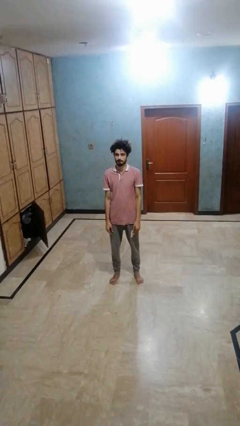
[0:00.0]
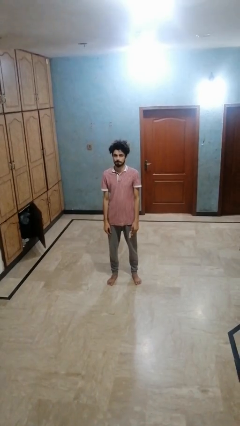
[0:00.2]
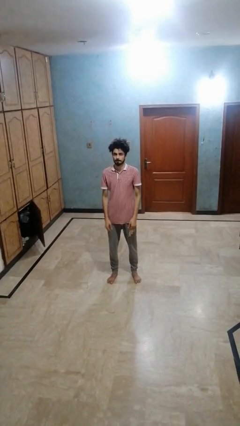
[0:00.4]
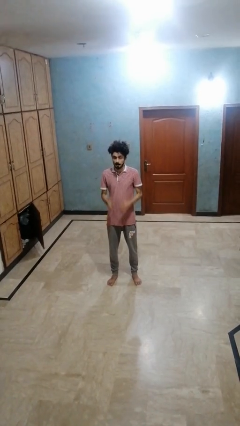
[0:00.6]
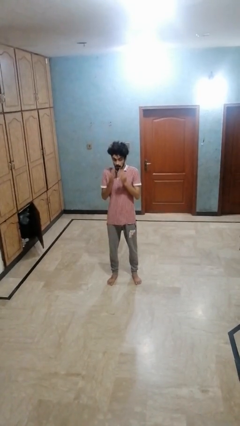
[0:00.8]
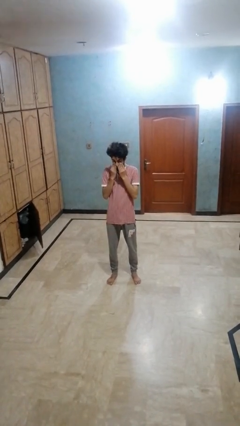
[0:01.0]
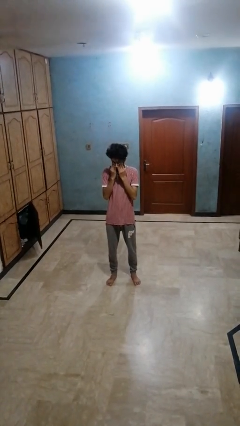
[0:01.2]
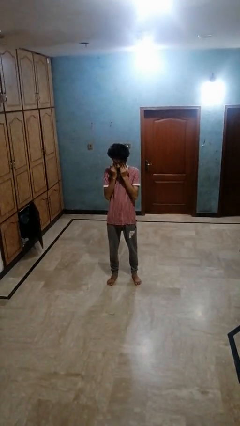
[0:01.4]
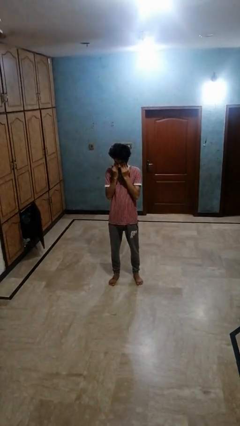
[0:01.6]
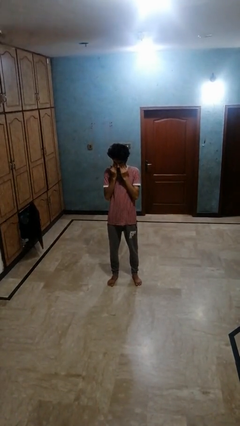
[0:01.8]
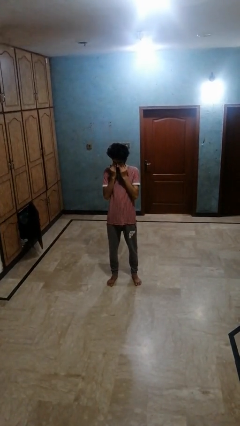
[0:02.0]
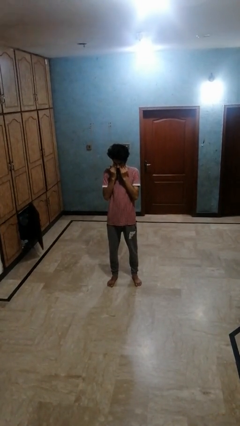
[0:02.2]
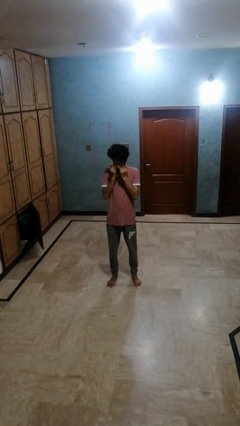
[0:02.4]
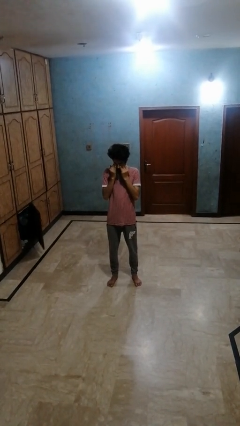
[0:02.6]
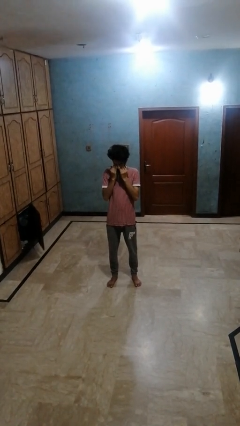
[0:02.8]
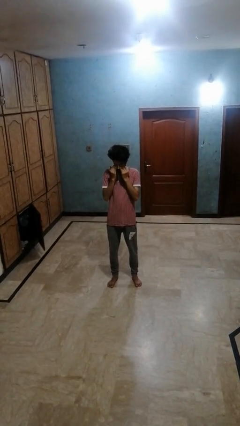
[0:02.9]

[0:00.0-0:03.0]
person rubs eyes

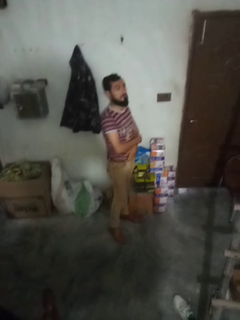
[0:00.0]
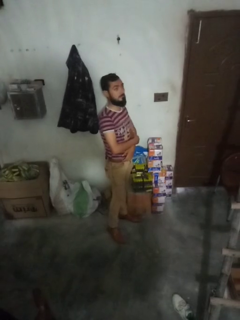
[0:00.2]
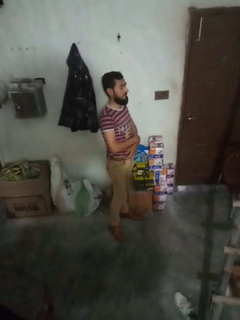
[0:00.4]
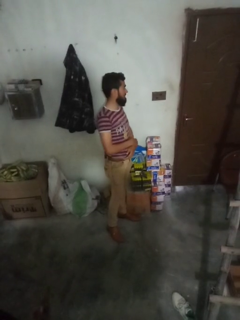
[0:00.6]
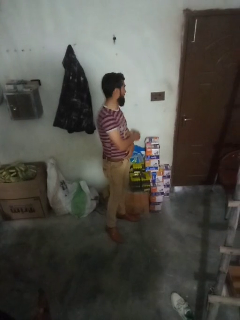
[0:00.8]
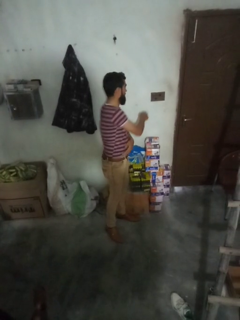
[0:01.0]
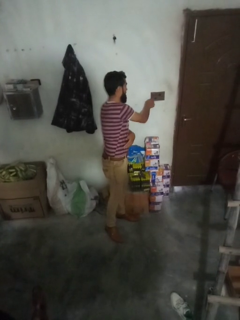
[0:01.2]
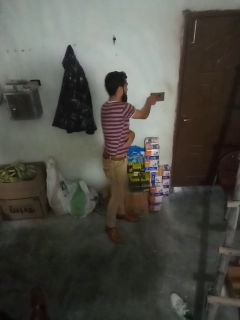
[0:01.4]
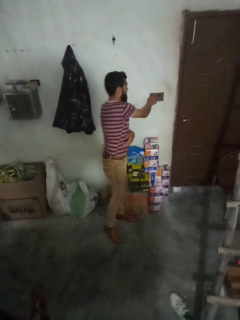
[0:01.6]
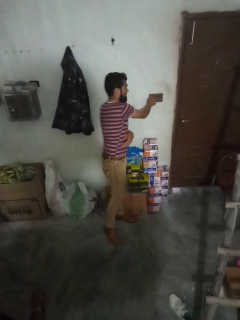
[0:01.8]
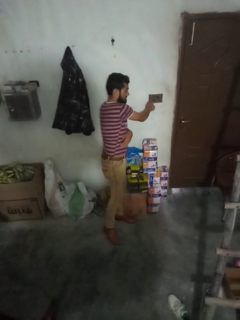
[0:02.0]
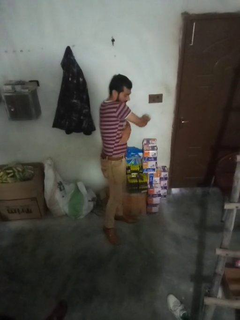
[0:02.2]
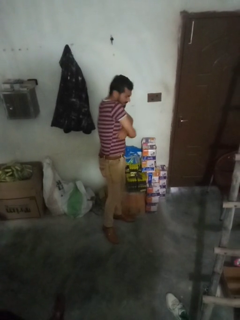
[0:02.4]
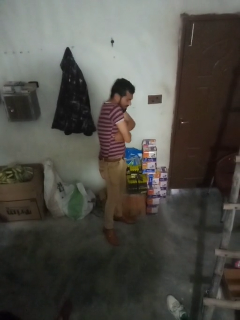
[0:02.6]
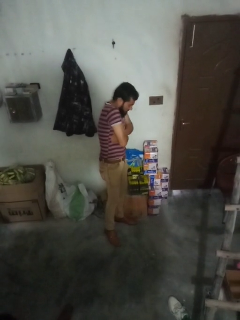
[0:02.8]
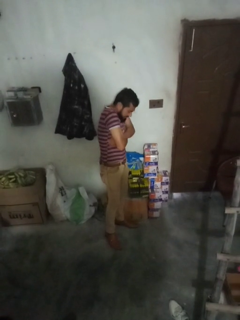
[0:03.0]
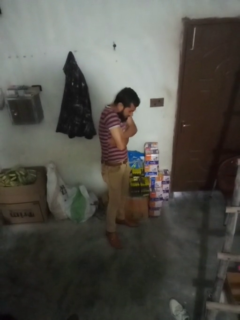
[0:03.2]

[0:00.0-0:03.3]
person adjusts thermostat

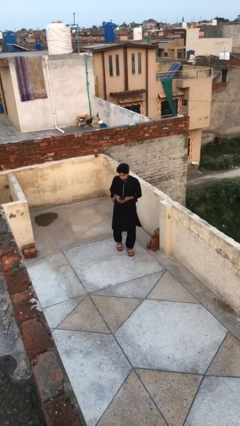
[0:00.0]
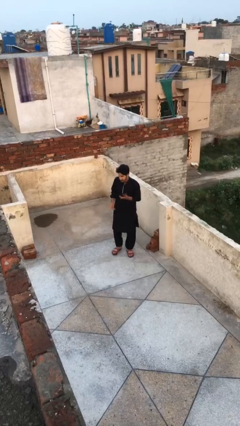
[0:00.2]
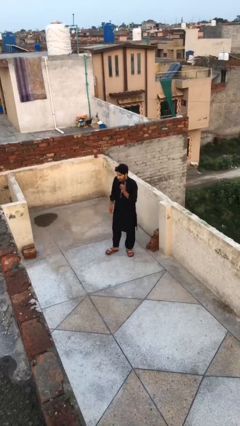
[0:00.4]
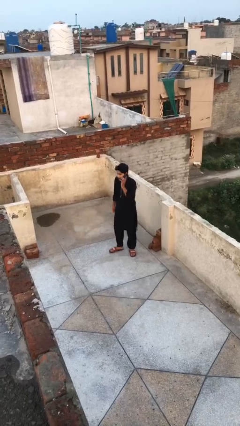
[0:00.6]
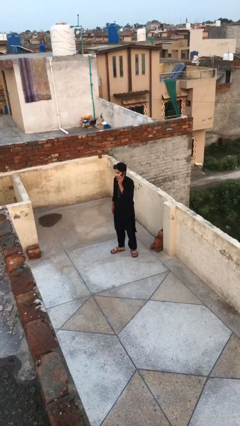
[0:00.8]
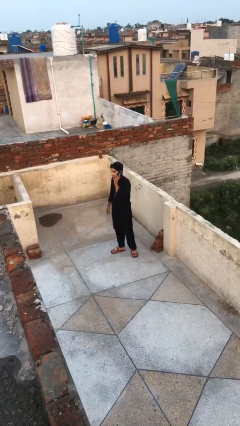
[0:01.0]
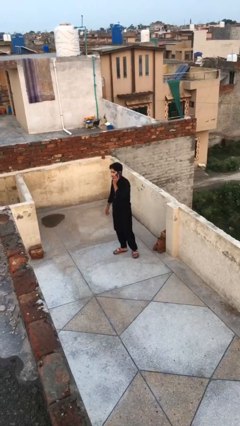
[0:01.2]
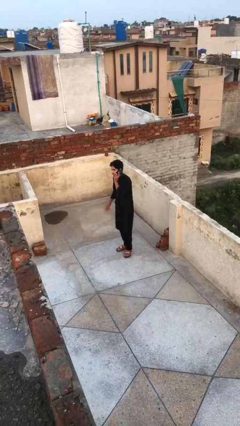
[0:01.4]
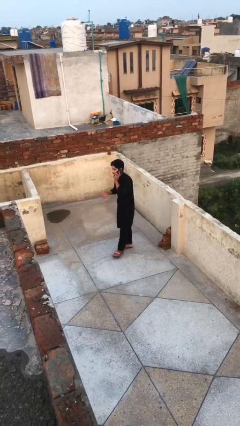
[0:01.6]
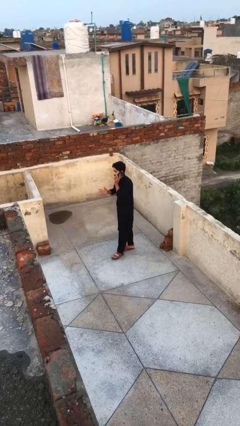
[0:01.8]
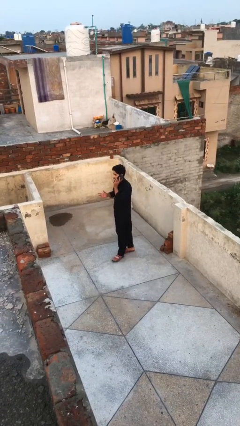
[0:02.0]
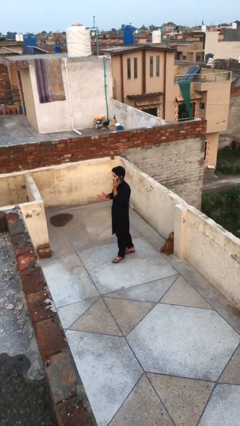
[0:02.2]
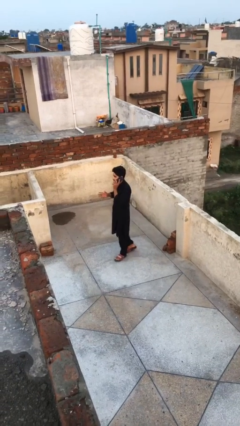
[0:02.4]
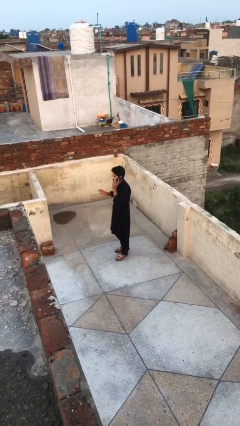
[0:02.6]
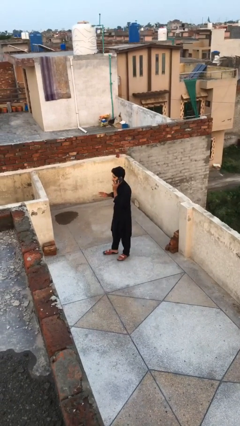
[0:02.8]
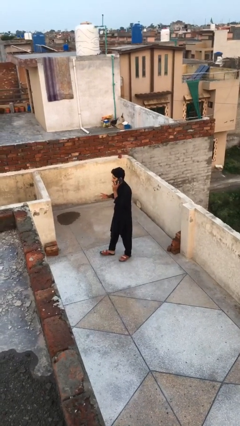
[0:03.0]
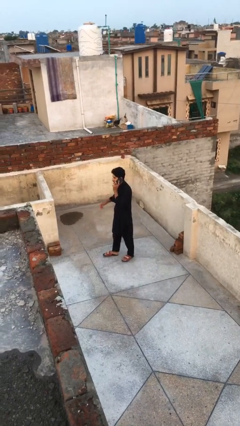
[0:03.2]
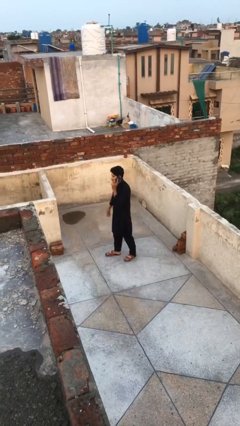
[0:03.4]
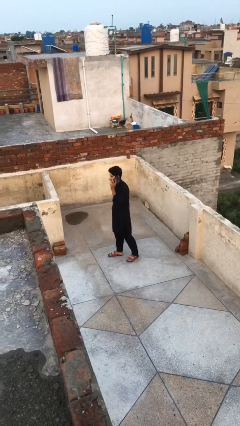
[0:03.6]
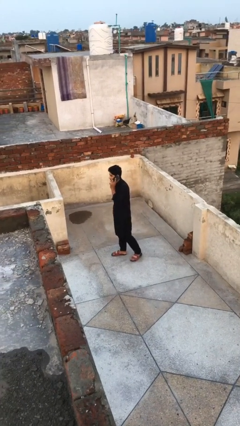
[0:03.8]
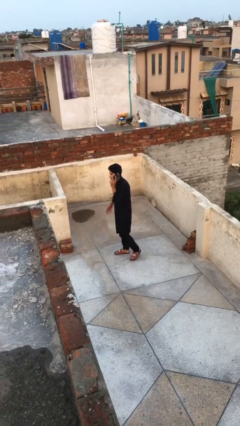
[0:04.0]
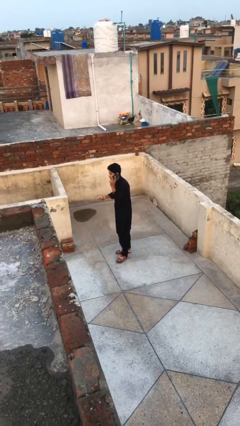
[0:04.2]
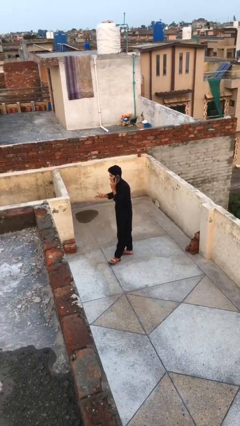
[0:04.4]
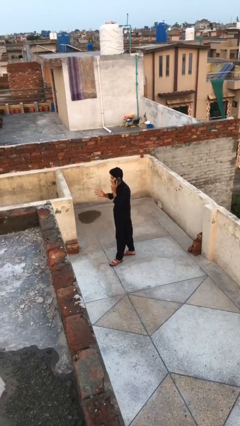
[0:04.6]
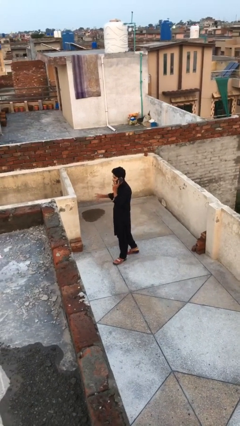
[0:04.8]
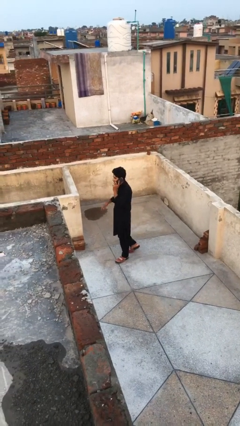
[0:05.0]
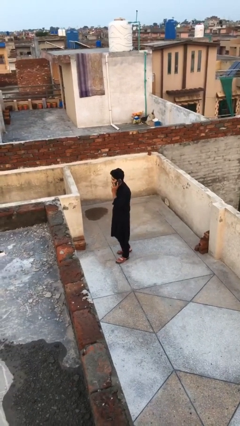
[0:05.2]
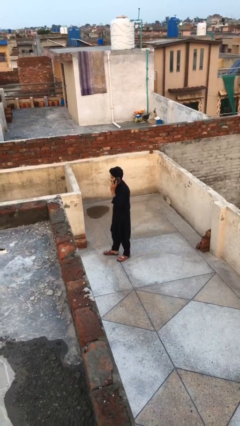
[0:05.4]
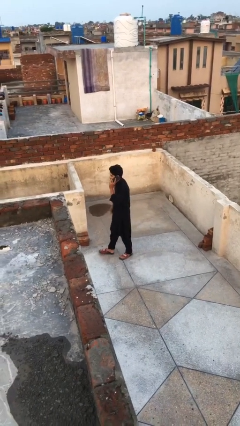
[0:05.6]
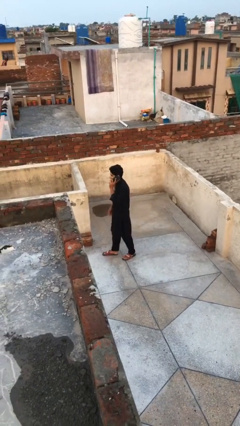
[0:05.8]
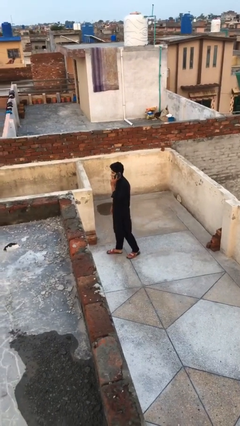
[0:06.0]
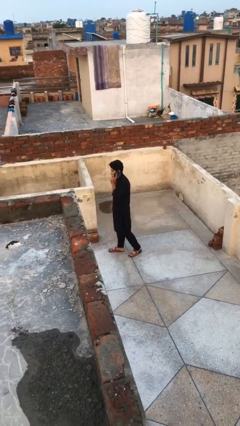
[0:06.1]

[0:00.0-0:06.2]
person talks on phone

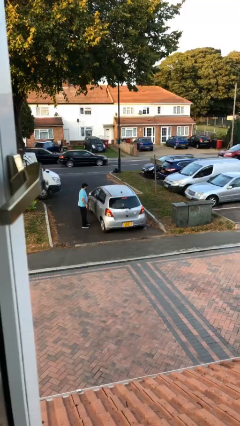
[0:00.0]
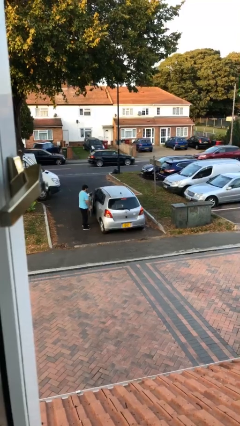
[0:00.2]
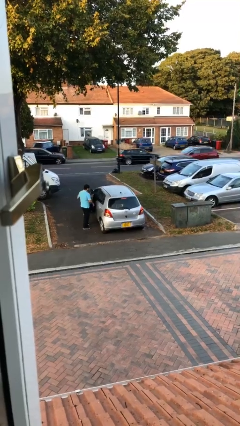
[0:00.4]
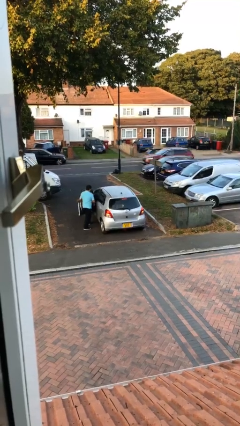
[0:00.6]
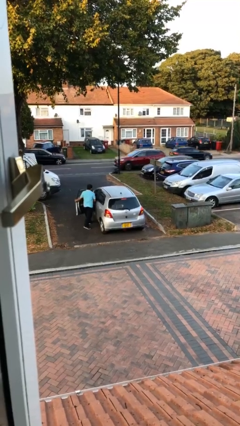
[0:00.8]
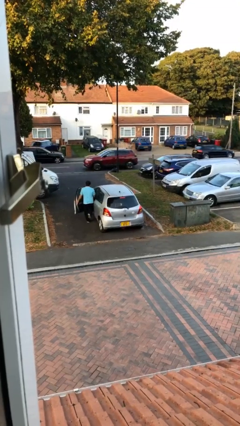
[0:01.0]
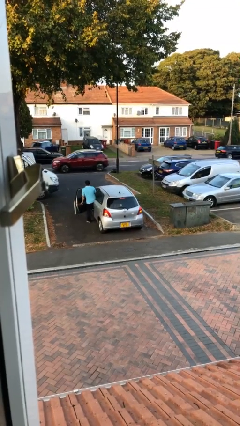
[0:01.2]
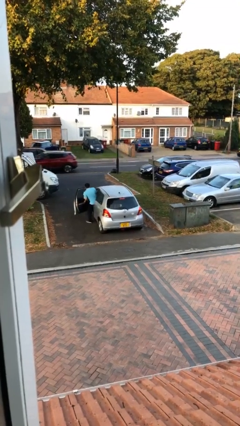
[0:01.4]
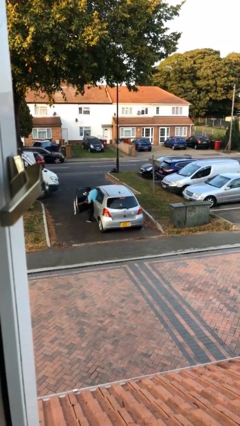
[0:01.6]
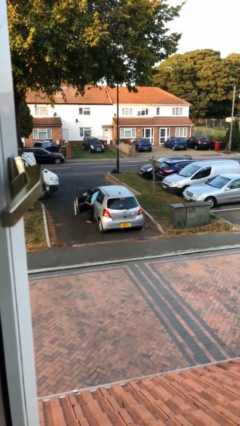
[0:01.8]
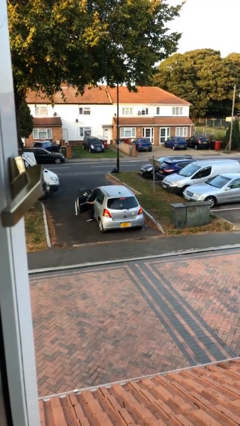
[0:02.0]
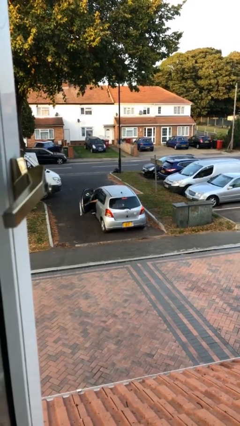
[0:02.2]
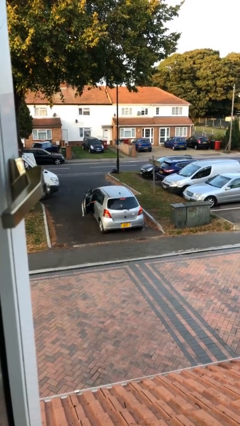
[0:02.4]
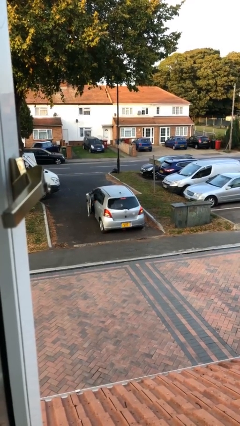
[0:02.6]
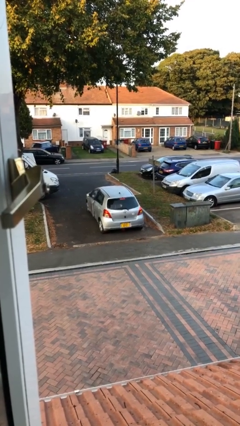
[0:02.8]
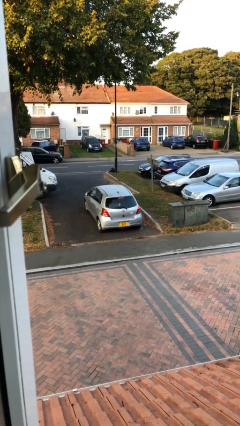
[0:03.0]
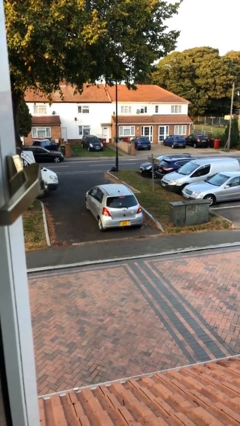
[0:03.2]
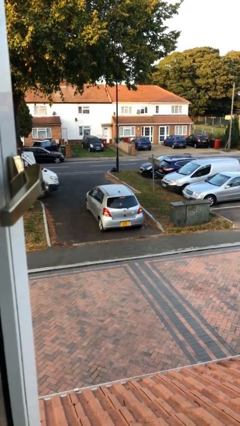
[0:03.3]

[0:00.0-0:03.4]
car picks up person

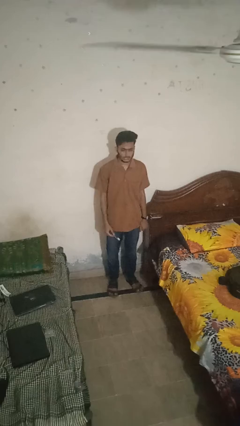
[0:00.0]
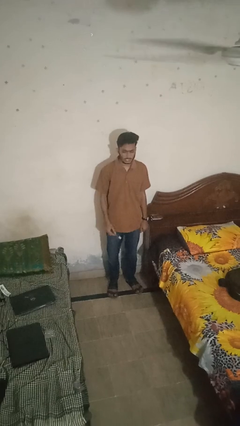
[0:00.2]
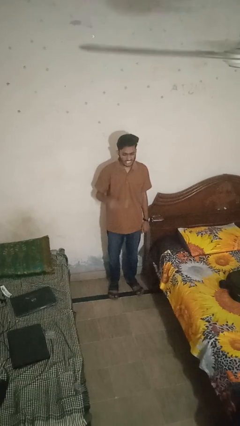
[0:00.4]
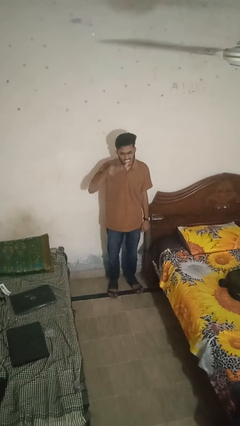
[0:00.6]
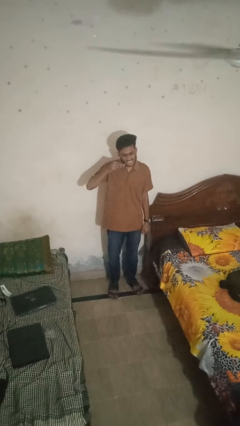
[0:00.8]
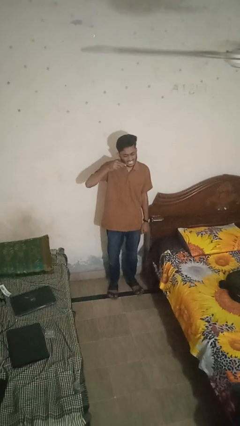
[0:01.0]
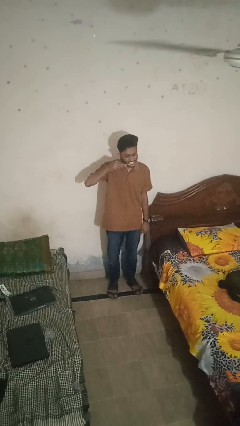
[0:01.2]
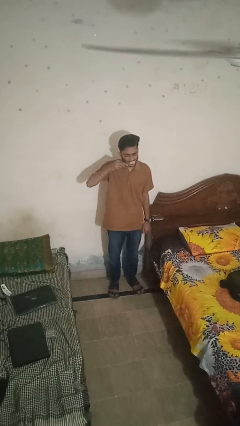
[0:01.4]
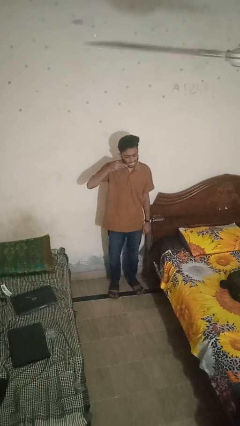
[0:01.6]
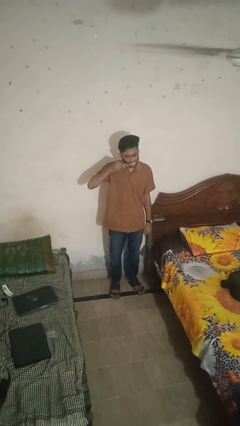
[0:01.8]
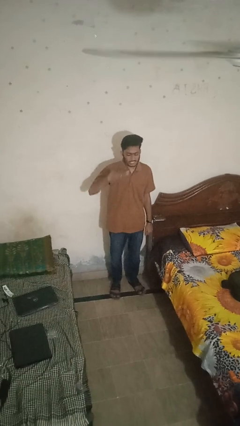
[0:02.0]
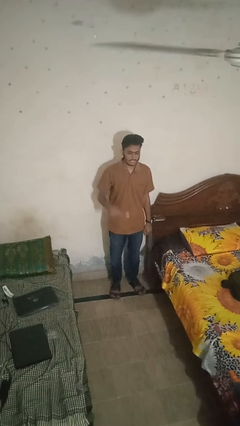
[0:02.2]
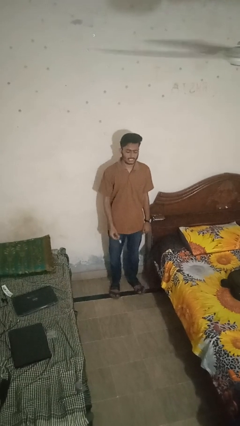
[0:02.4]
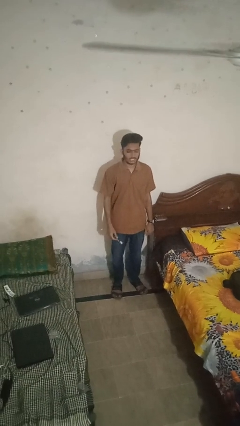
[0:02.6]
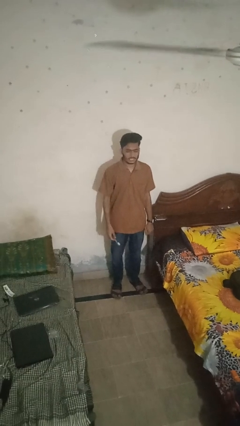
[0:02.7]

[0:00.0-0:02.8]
person brushes teeth

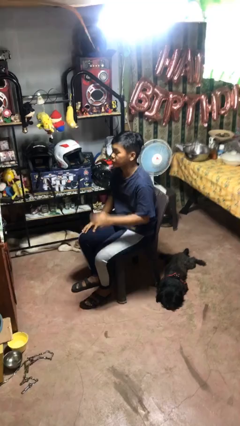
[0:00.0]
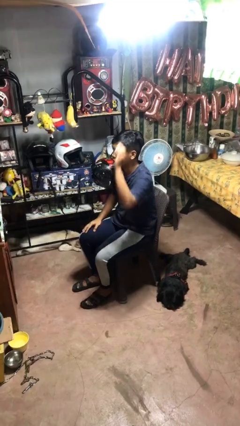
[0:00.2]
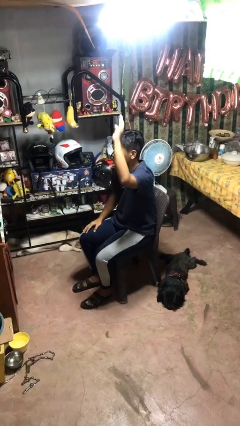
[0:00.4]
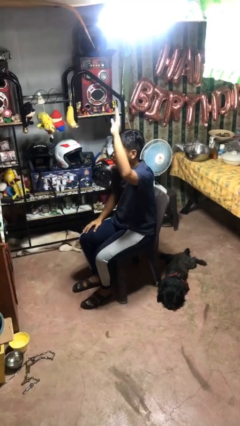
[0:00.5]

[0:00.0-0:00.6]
person gestures raise hand
